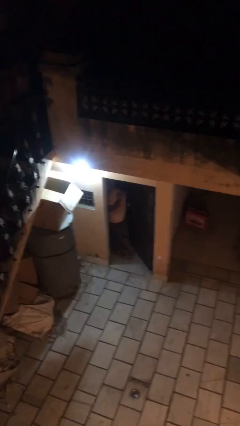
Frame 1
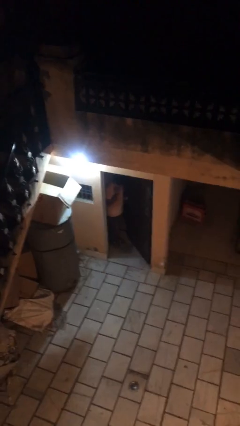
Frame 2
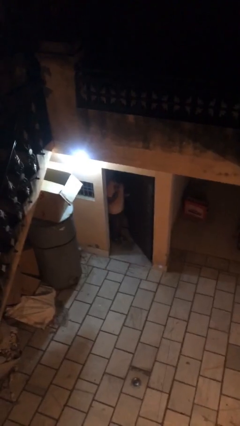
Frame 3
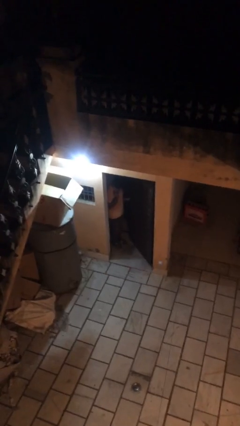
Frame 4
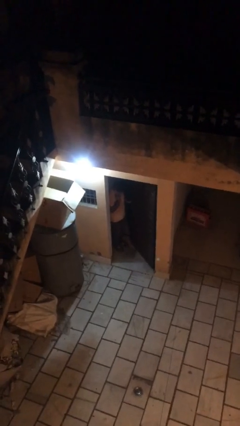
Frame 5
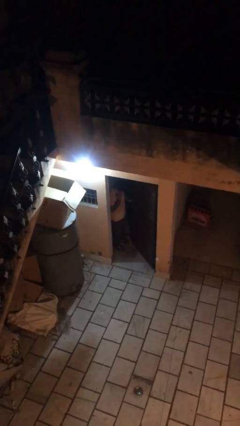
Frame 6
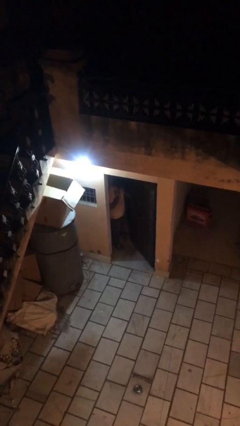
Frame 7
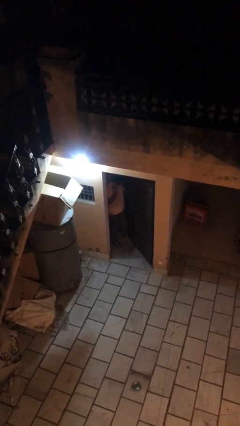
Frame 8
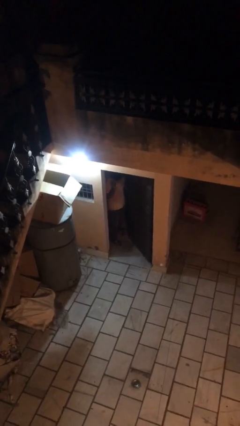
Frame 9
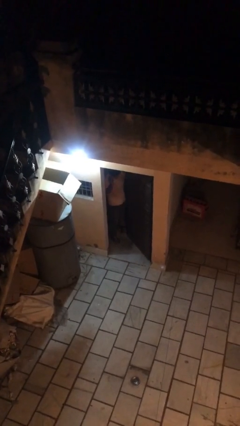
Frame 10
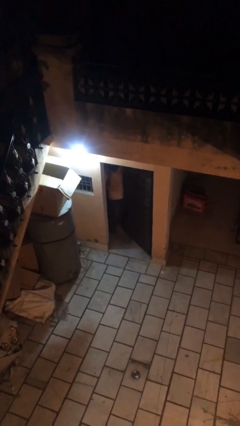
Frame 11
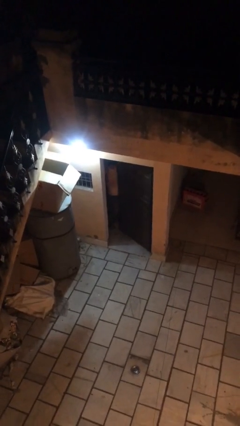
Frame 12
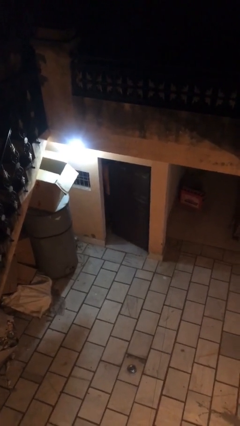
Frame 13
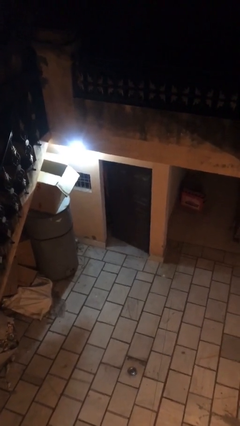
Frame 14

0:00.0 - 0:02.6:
person exits scene through structure

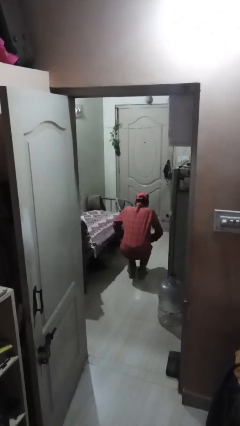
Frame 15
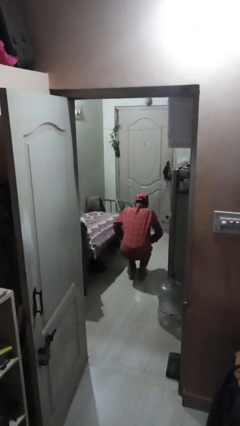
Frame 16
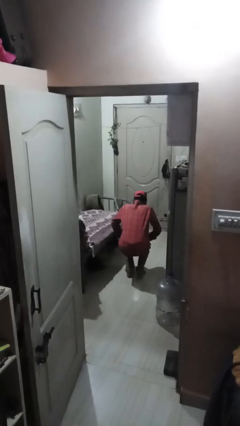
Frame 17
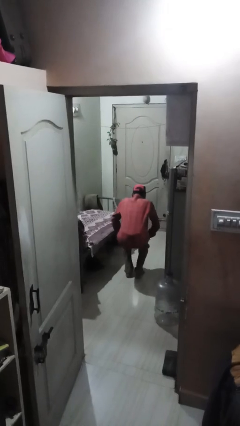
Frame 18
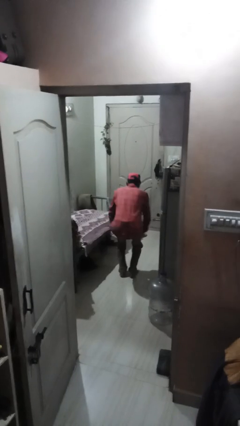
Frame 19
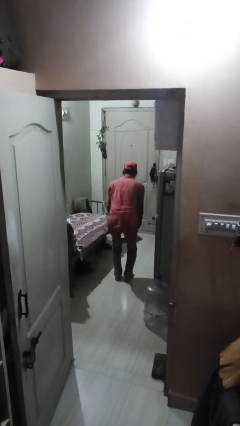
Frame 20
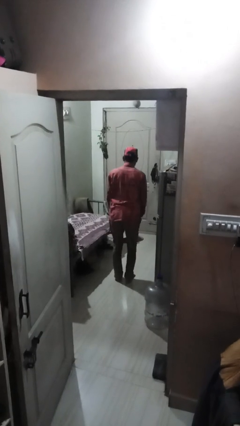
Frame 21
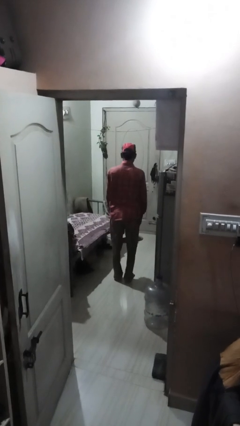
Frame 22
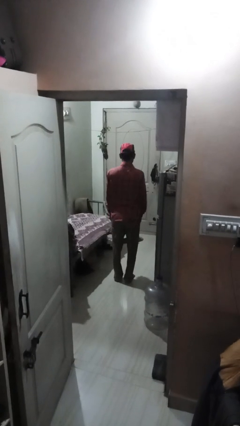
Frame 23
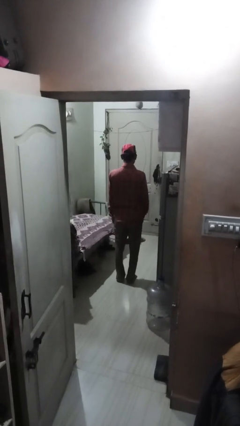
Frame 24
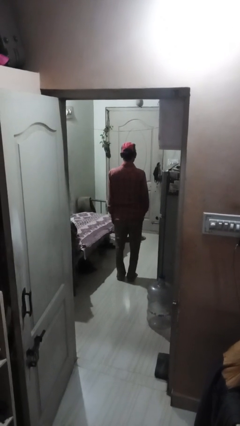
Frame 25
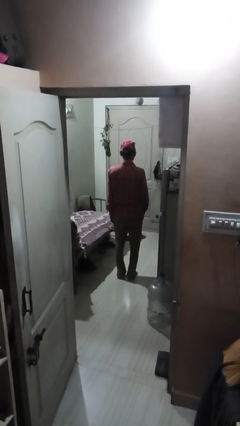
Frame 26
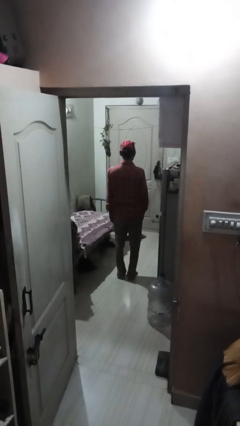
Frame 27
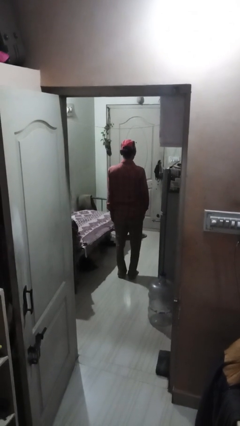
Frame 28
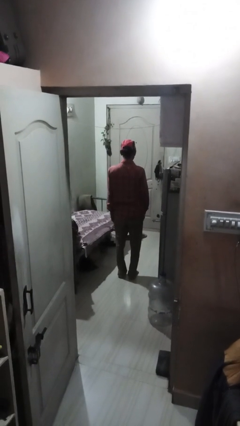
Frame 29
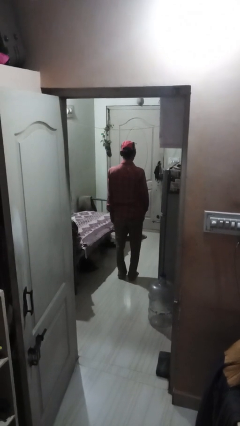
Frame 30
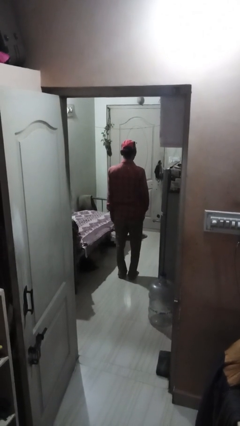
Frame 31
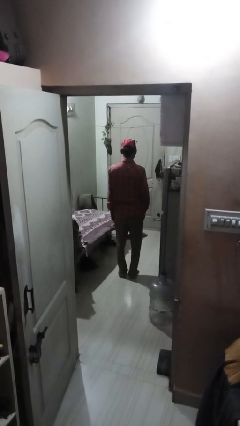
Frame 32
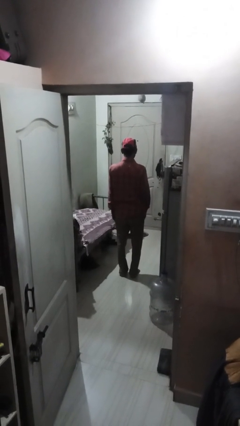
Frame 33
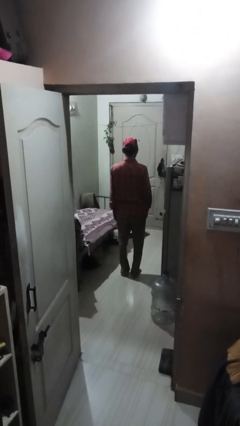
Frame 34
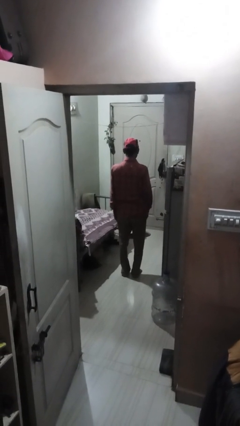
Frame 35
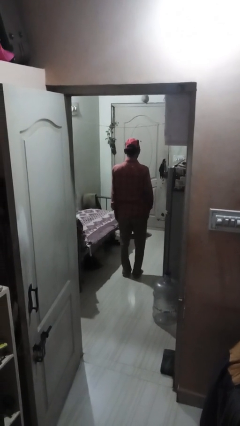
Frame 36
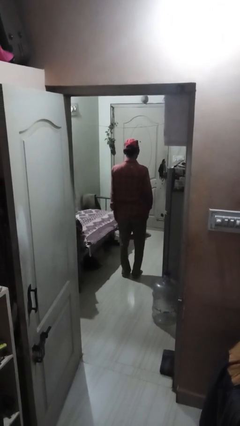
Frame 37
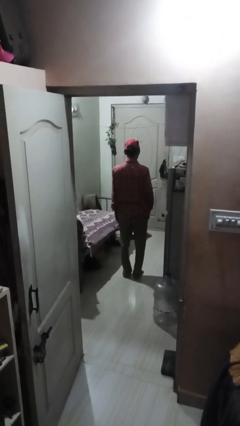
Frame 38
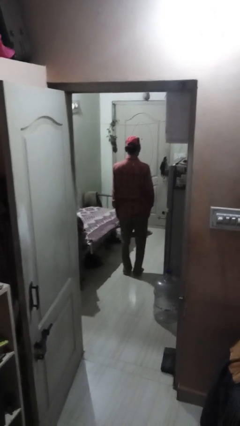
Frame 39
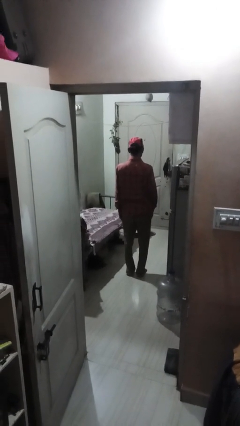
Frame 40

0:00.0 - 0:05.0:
person stands up

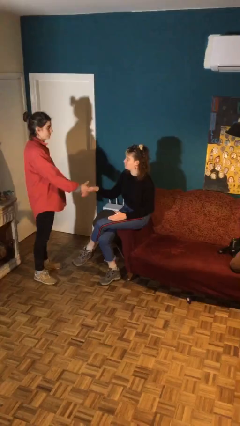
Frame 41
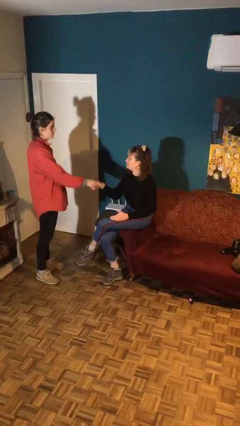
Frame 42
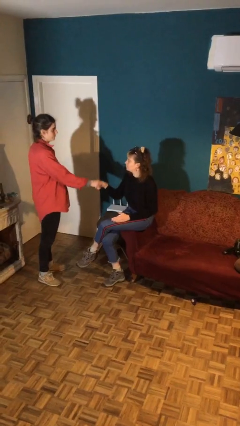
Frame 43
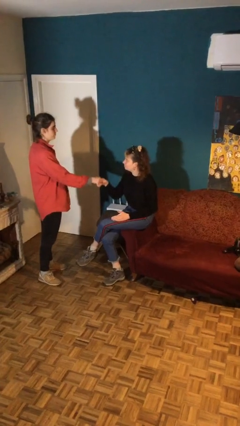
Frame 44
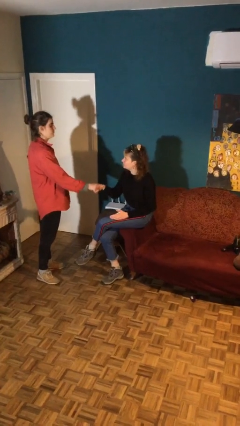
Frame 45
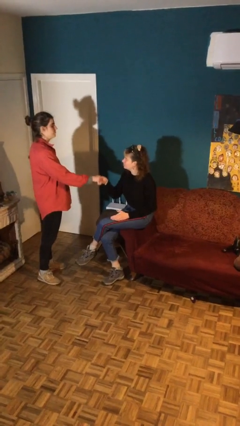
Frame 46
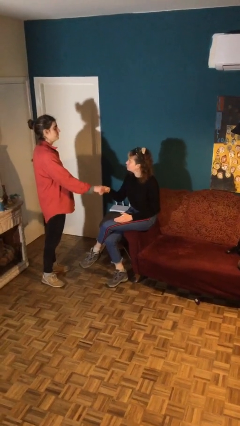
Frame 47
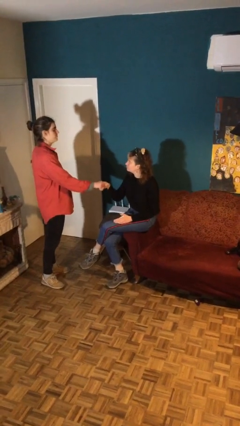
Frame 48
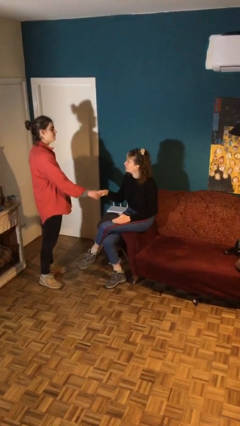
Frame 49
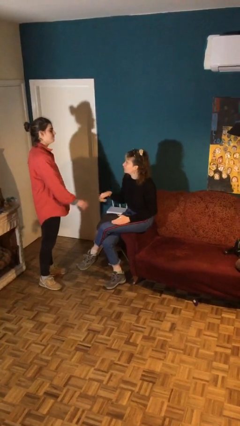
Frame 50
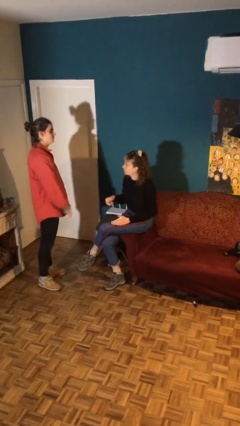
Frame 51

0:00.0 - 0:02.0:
person shakes hand

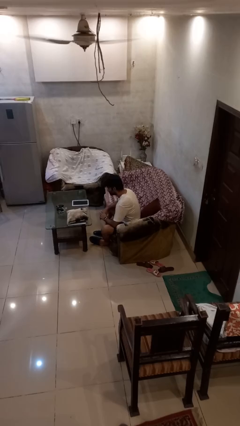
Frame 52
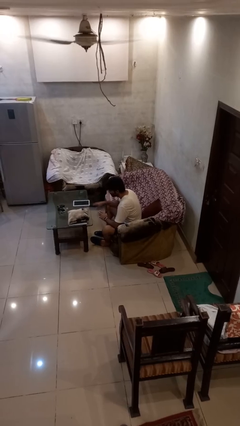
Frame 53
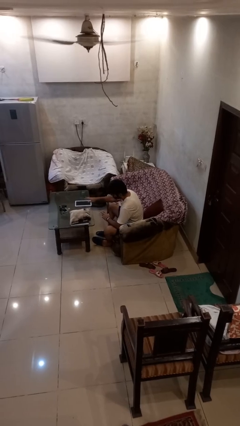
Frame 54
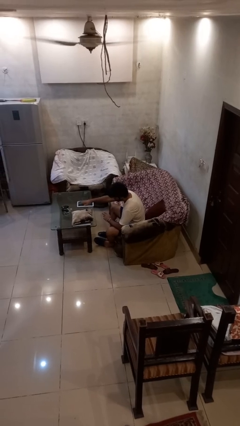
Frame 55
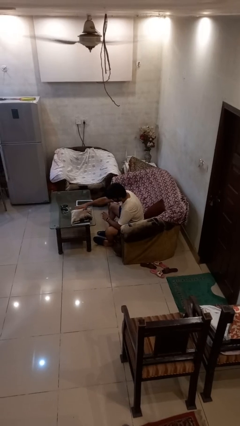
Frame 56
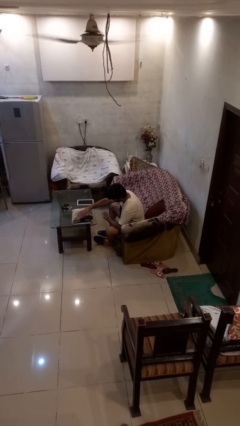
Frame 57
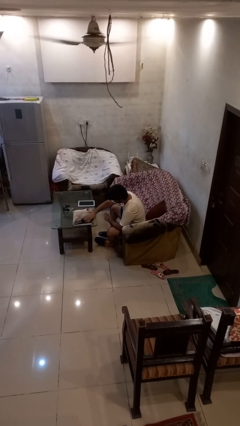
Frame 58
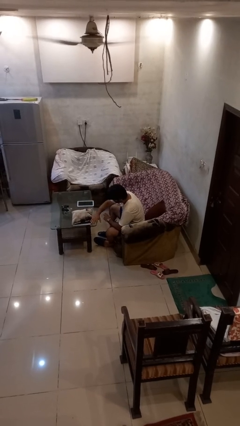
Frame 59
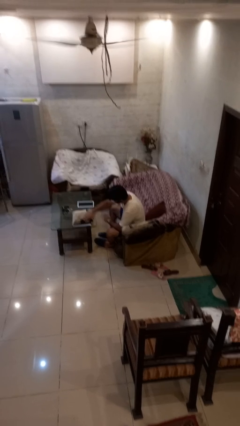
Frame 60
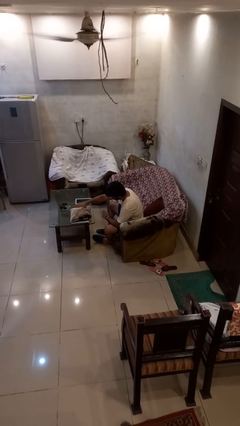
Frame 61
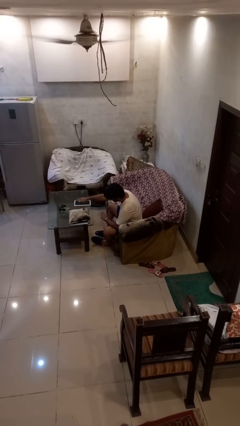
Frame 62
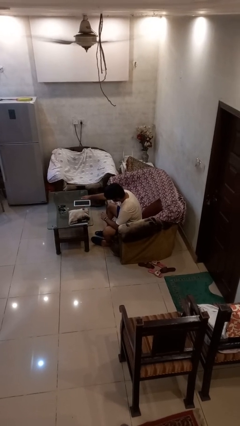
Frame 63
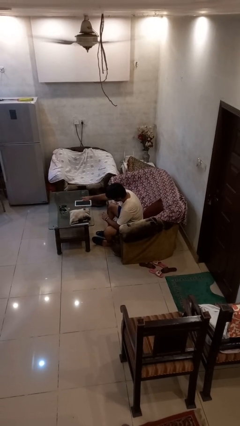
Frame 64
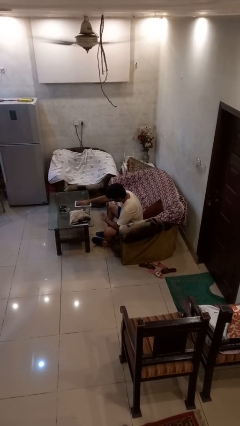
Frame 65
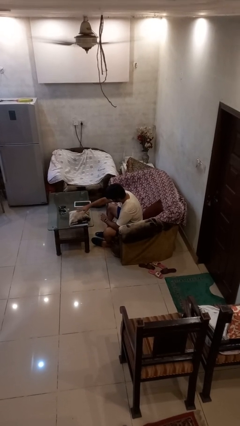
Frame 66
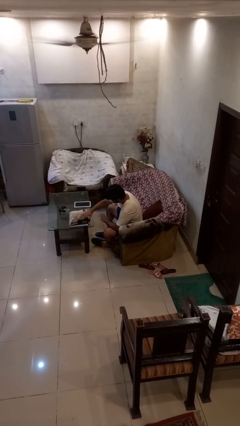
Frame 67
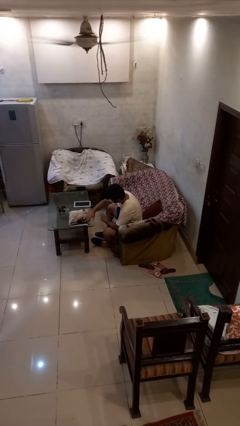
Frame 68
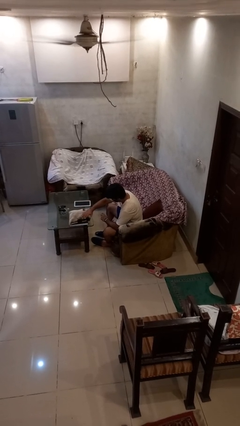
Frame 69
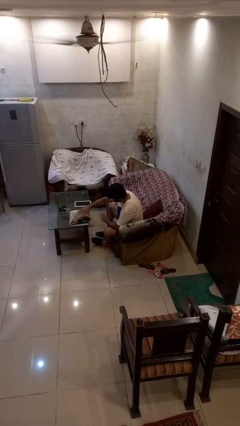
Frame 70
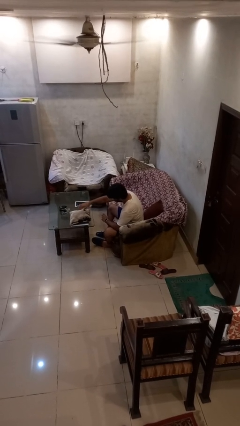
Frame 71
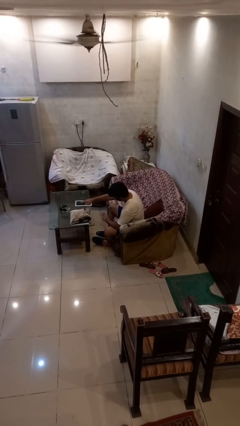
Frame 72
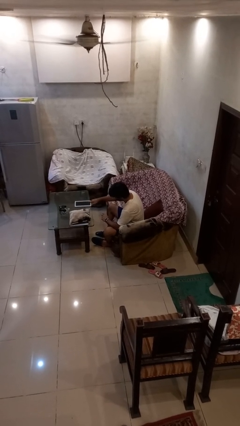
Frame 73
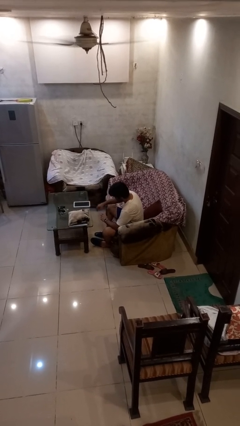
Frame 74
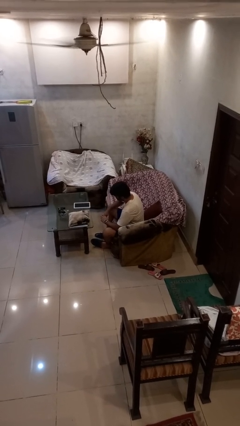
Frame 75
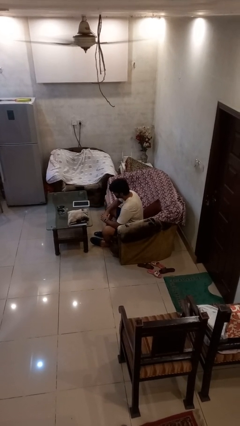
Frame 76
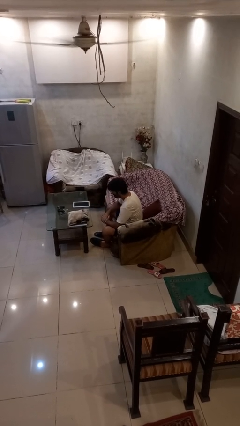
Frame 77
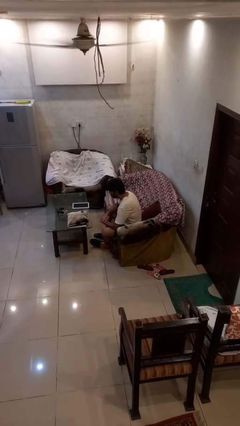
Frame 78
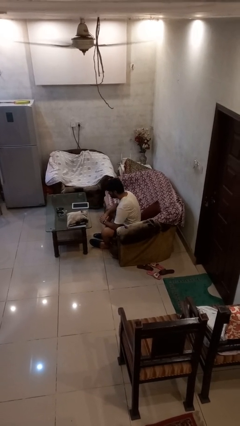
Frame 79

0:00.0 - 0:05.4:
person waves hand over object

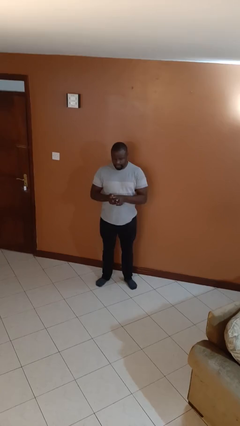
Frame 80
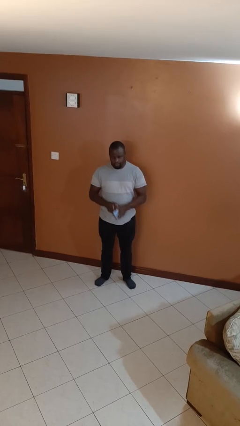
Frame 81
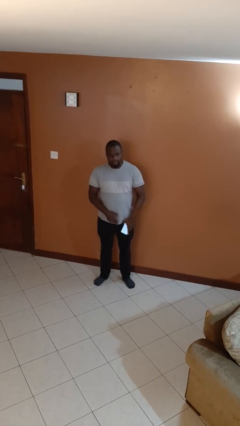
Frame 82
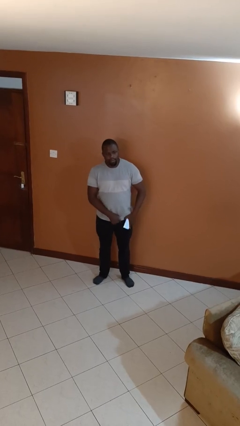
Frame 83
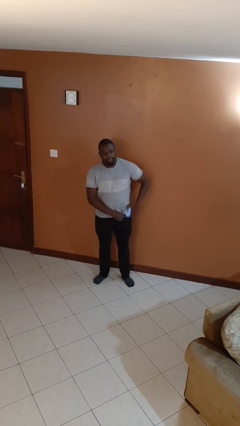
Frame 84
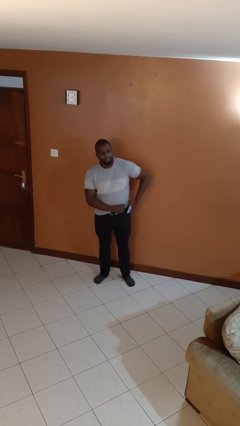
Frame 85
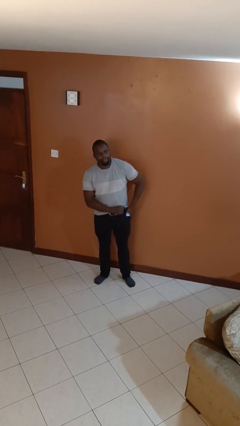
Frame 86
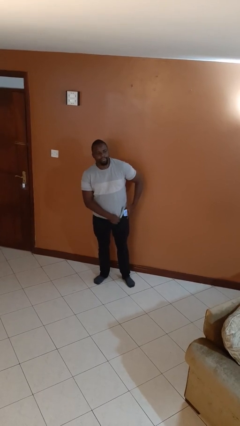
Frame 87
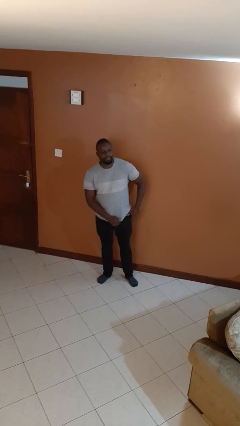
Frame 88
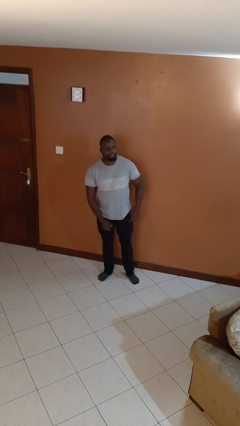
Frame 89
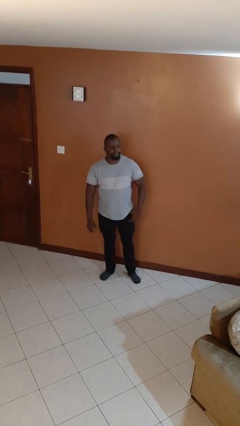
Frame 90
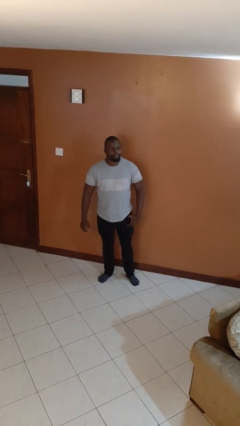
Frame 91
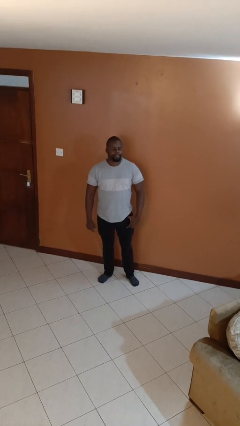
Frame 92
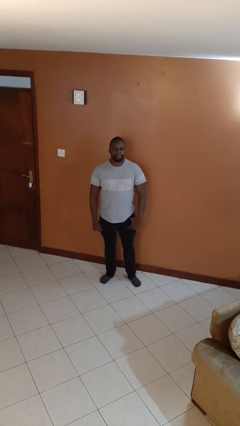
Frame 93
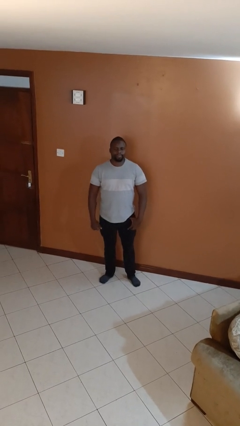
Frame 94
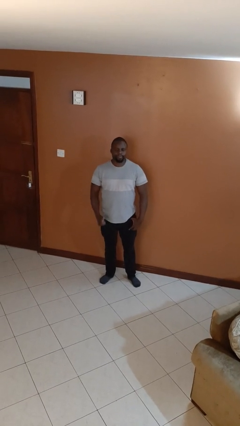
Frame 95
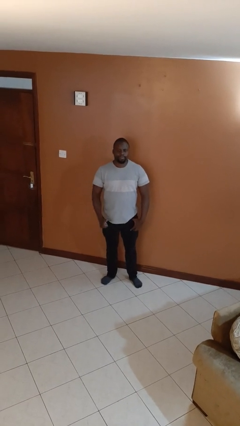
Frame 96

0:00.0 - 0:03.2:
person puts phone into pocket
